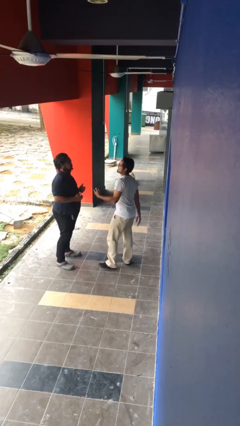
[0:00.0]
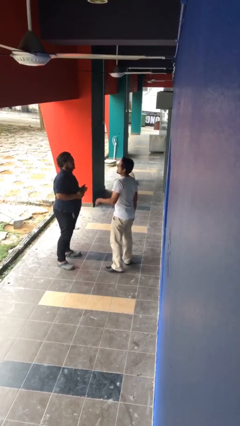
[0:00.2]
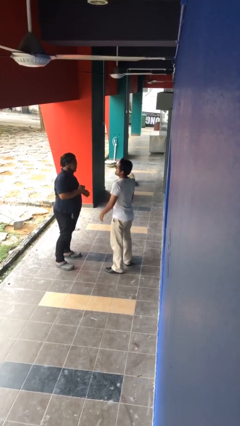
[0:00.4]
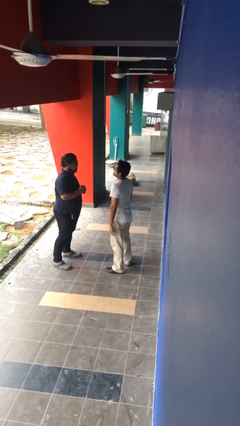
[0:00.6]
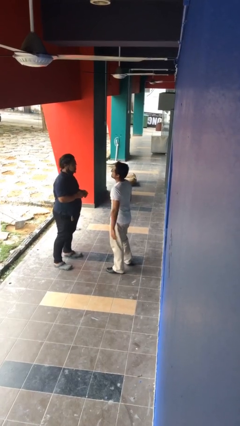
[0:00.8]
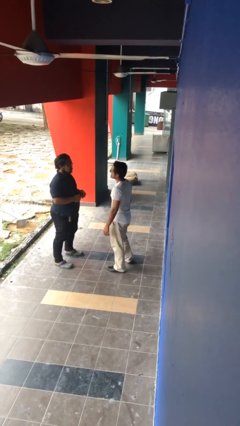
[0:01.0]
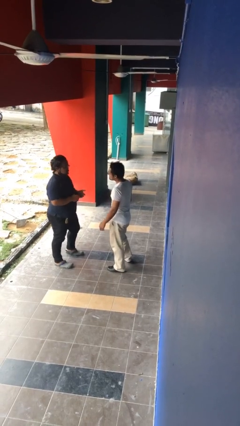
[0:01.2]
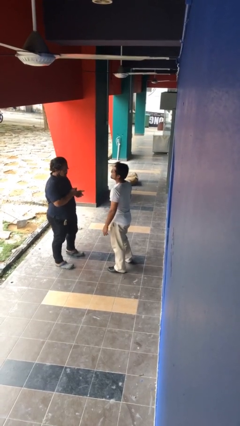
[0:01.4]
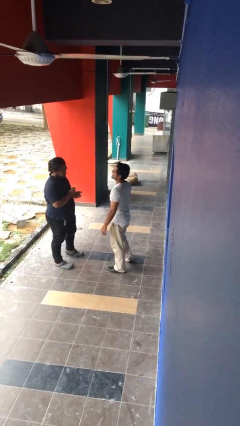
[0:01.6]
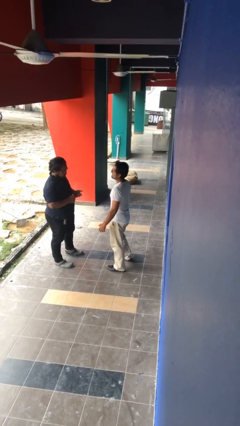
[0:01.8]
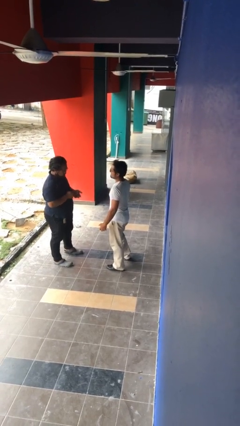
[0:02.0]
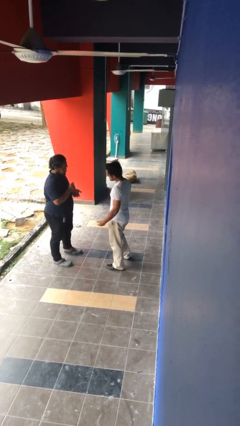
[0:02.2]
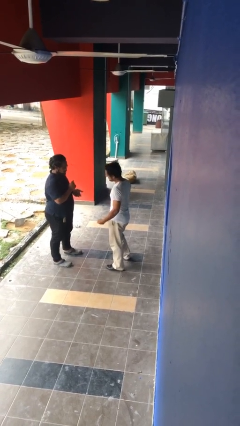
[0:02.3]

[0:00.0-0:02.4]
person talks to person

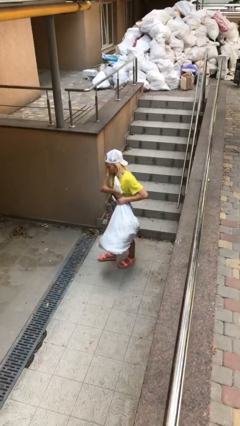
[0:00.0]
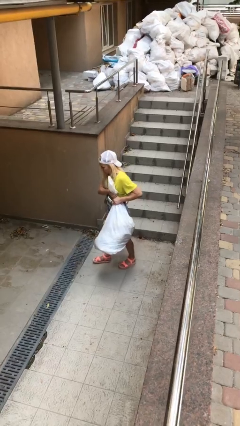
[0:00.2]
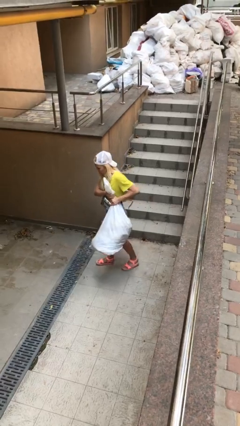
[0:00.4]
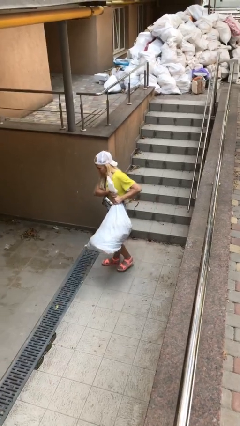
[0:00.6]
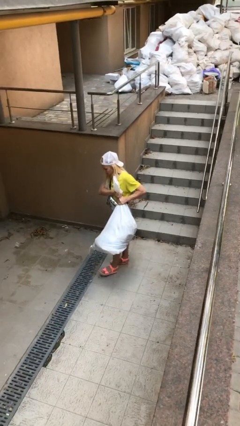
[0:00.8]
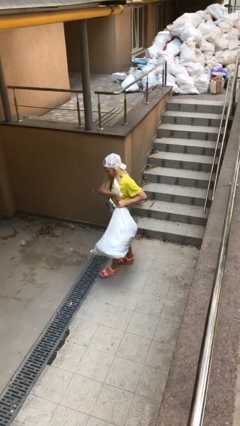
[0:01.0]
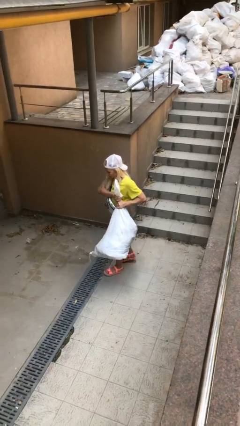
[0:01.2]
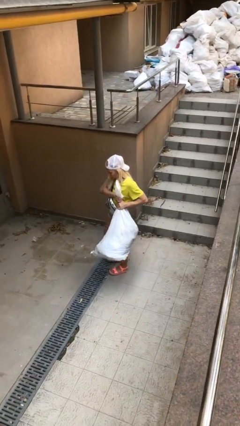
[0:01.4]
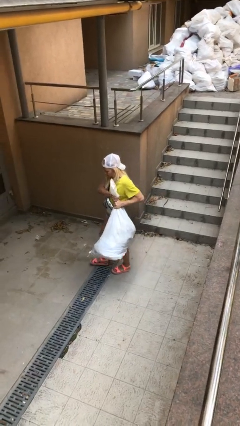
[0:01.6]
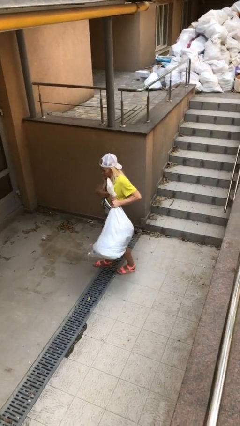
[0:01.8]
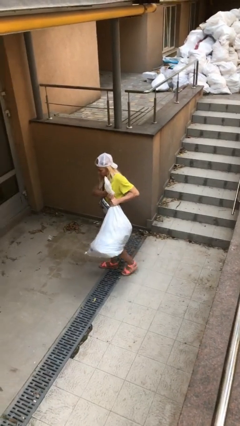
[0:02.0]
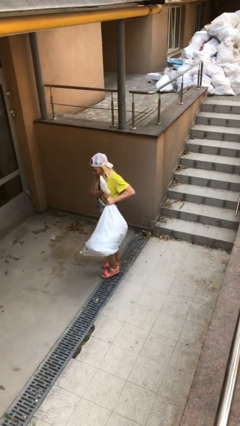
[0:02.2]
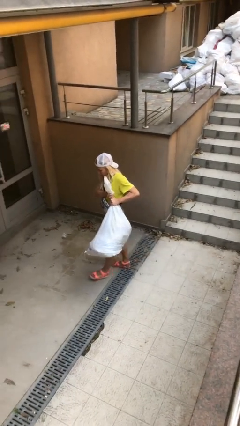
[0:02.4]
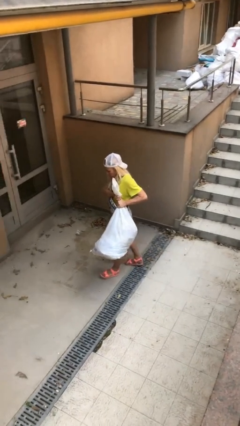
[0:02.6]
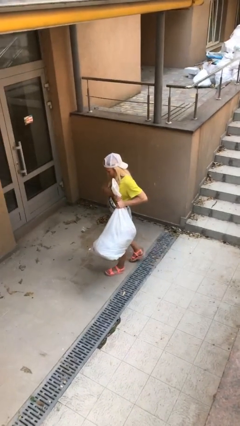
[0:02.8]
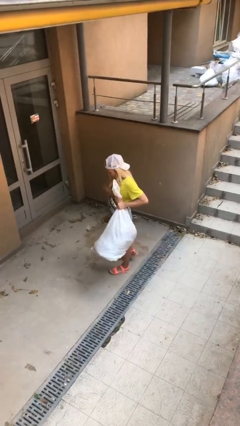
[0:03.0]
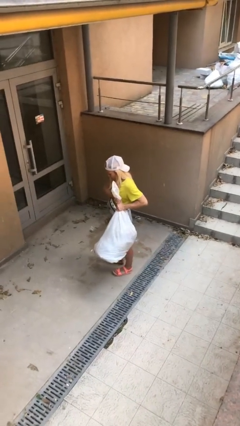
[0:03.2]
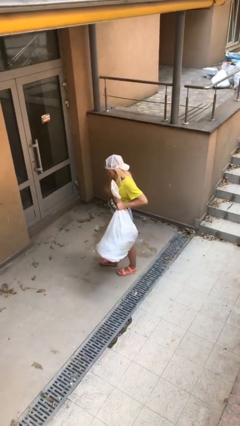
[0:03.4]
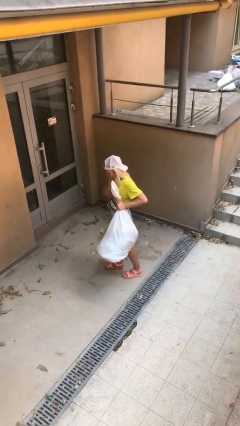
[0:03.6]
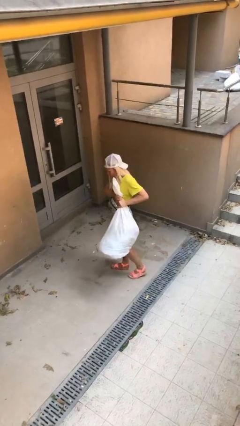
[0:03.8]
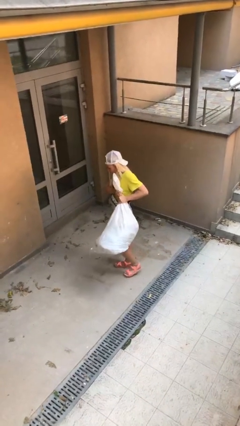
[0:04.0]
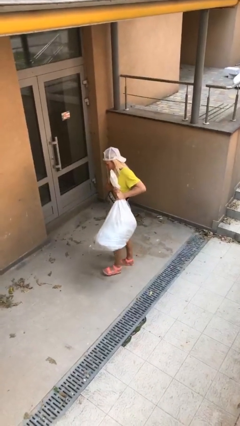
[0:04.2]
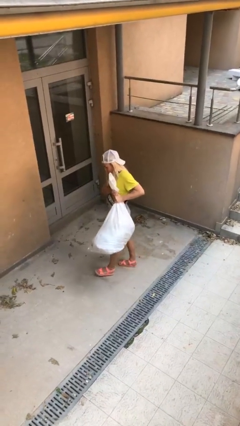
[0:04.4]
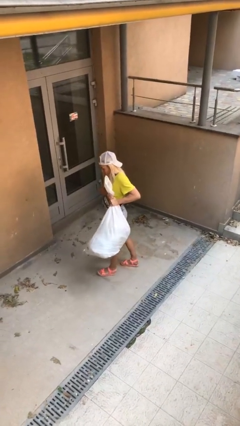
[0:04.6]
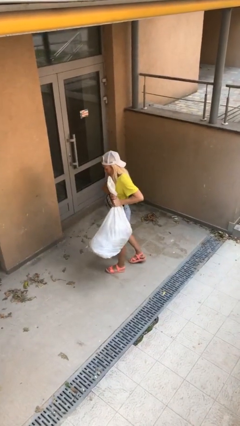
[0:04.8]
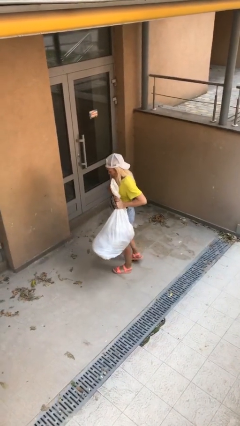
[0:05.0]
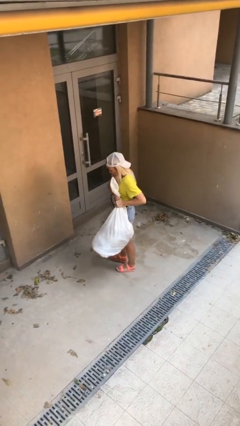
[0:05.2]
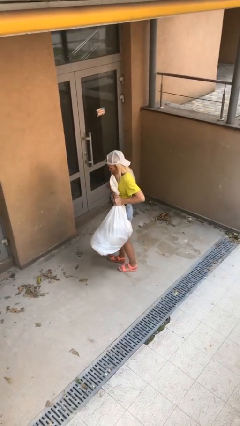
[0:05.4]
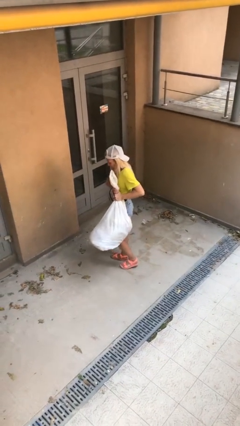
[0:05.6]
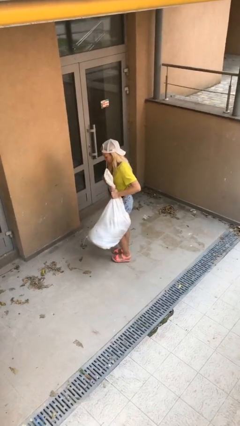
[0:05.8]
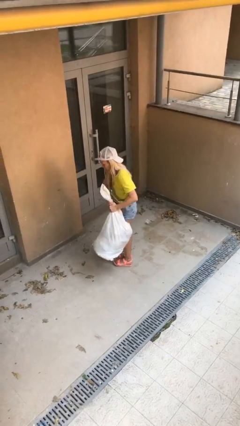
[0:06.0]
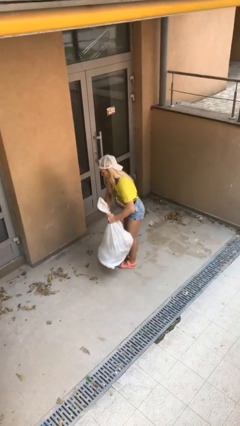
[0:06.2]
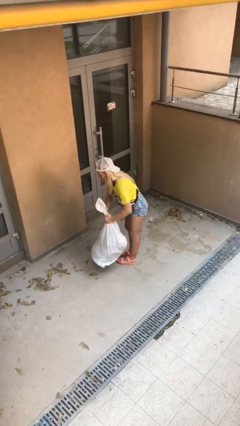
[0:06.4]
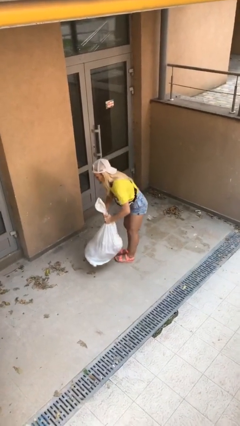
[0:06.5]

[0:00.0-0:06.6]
person carries heavy object

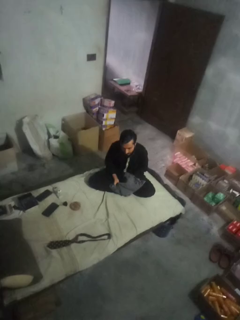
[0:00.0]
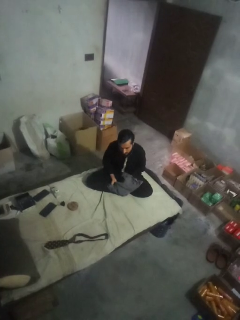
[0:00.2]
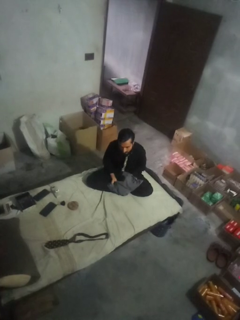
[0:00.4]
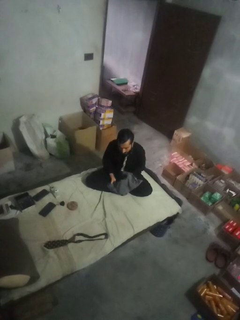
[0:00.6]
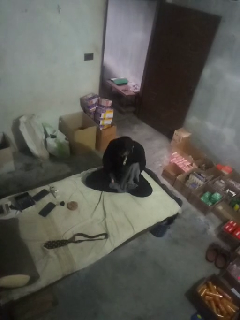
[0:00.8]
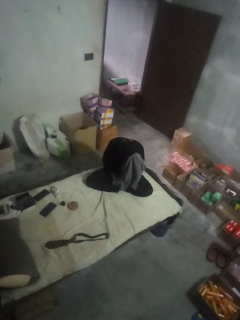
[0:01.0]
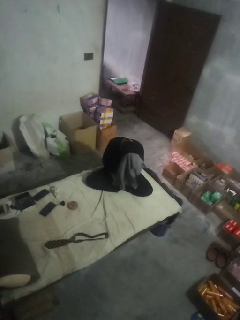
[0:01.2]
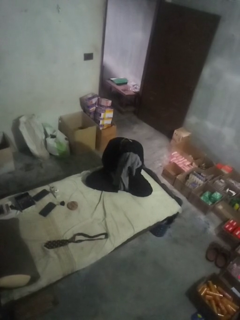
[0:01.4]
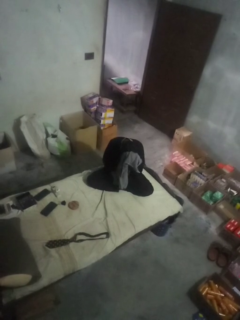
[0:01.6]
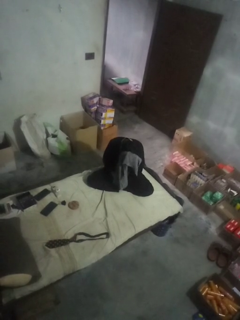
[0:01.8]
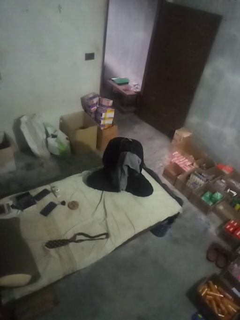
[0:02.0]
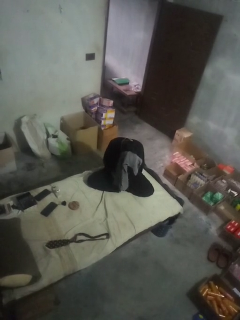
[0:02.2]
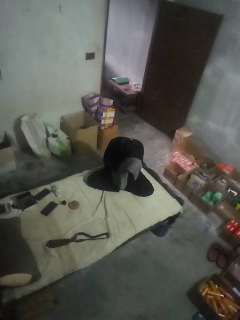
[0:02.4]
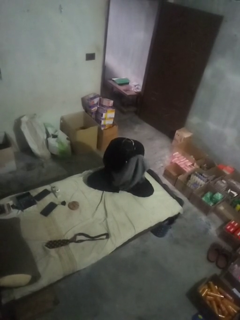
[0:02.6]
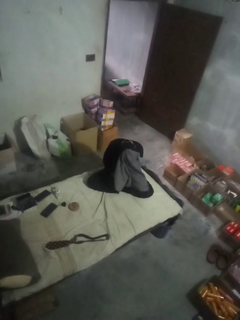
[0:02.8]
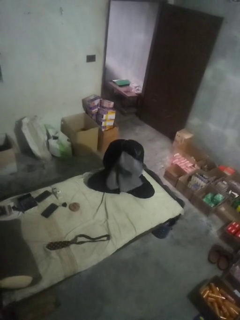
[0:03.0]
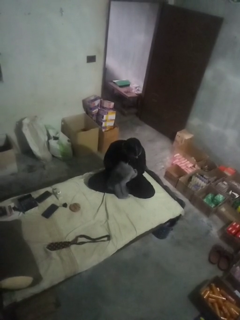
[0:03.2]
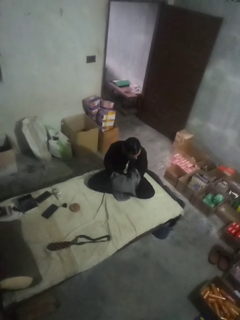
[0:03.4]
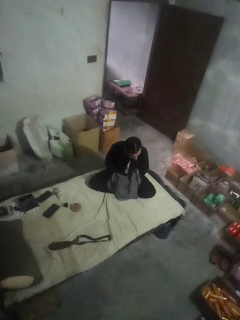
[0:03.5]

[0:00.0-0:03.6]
person dries hair with towel

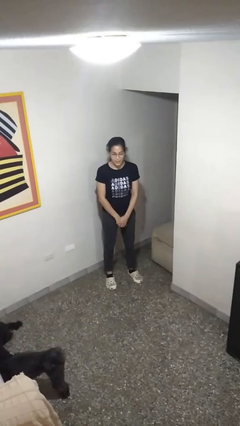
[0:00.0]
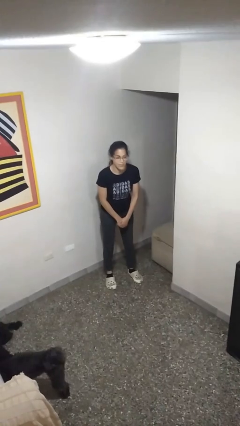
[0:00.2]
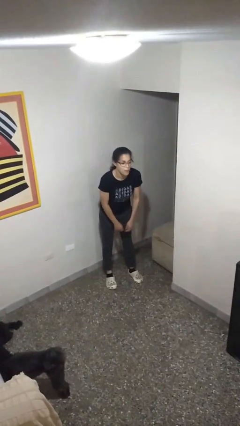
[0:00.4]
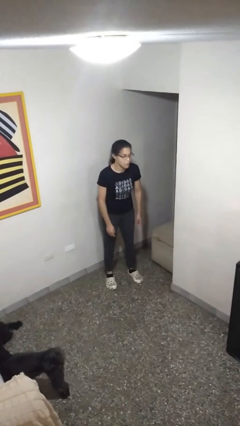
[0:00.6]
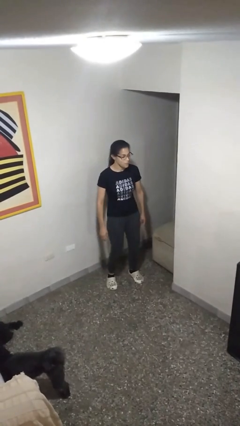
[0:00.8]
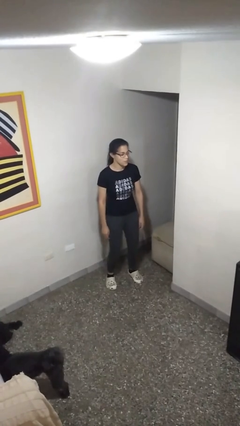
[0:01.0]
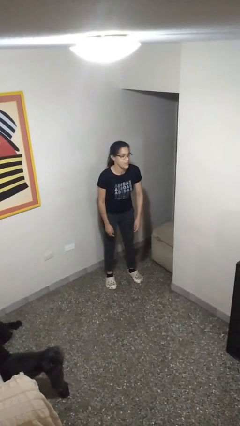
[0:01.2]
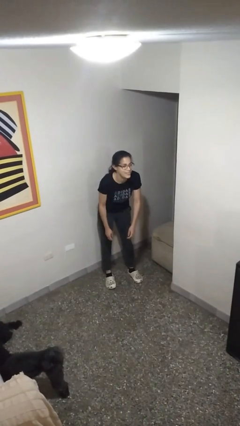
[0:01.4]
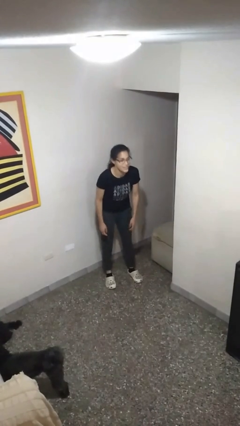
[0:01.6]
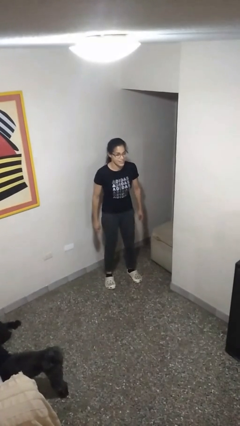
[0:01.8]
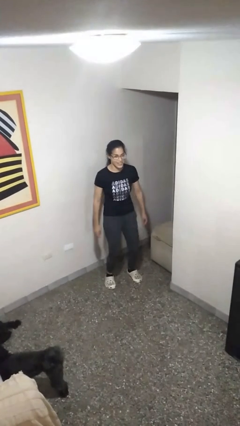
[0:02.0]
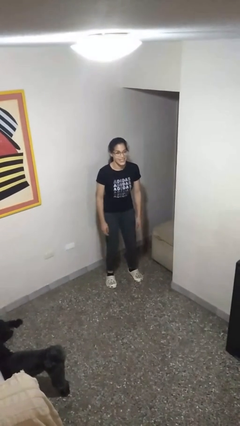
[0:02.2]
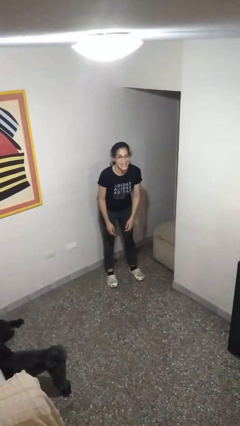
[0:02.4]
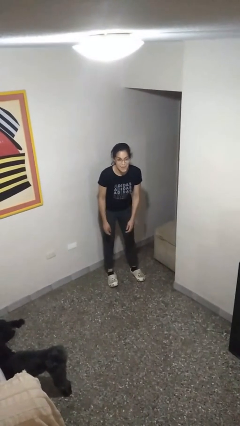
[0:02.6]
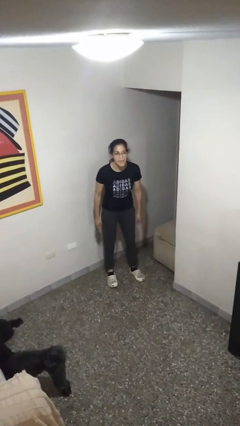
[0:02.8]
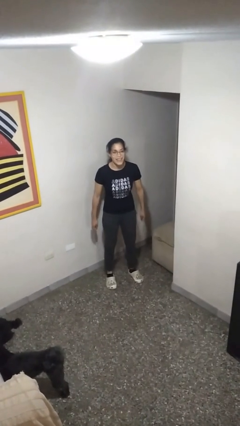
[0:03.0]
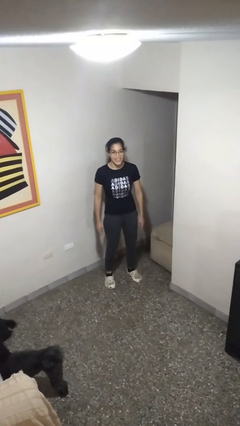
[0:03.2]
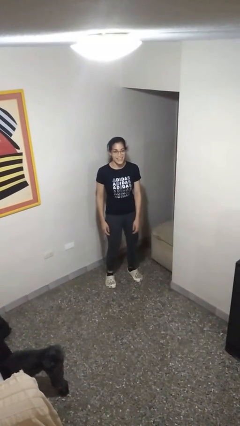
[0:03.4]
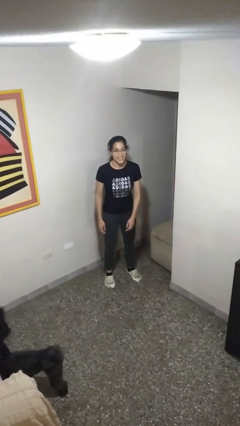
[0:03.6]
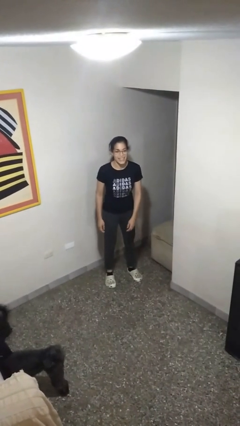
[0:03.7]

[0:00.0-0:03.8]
person wiggles hips

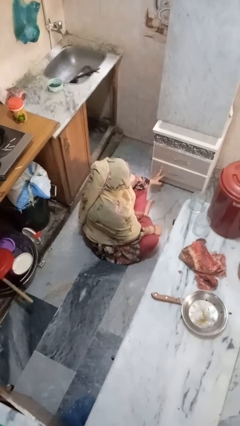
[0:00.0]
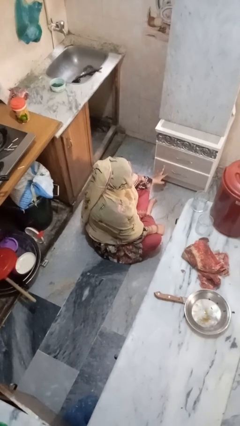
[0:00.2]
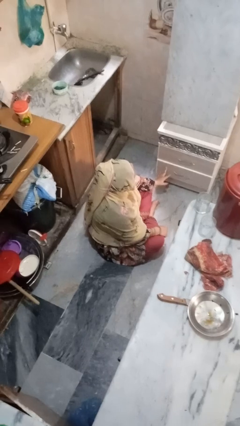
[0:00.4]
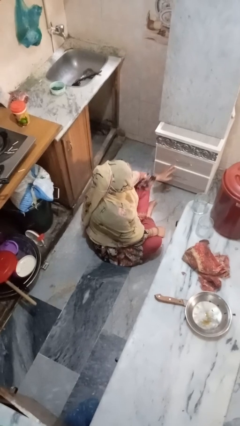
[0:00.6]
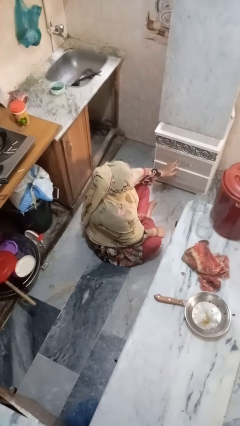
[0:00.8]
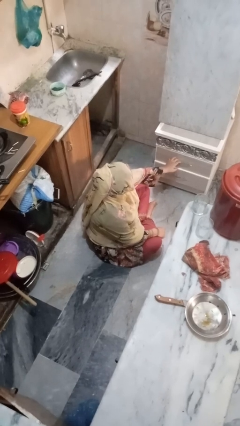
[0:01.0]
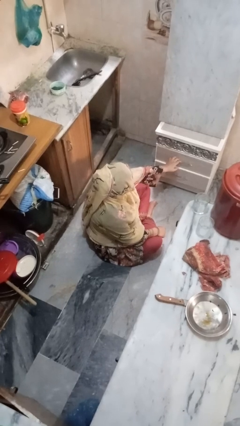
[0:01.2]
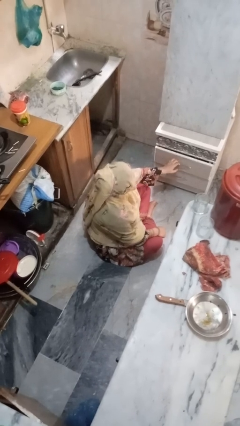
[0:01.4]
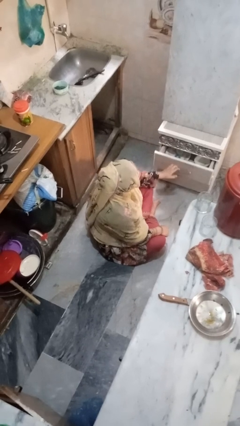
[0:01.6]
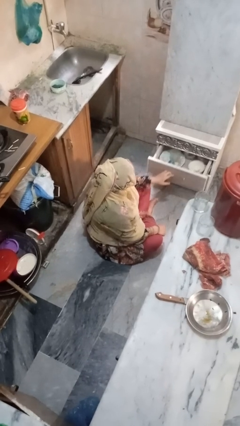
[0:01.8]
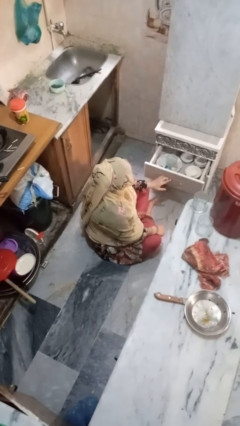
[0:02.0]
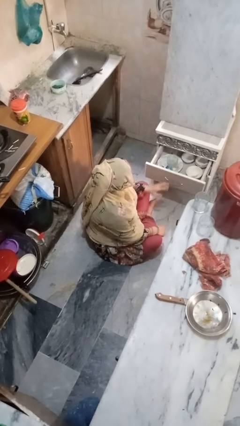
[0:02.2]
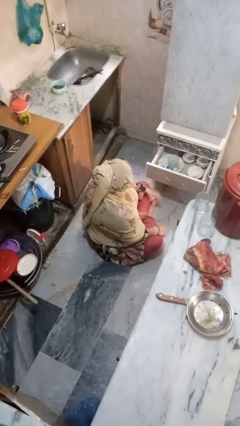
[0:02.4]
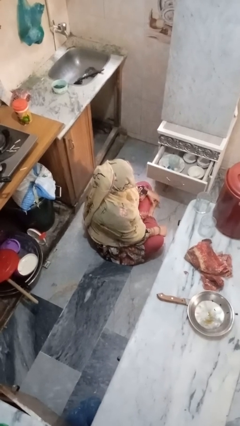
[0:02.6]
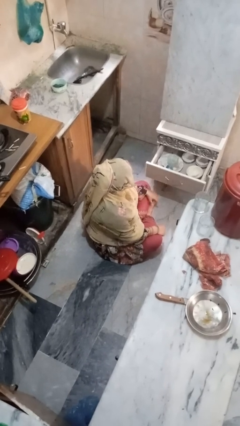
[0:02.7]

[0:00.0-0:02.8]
person opens kitchen drawer
